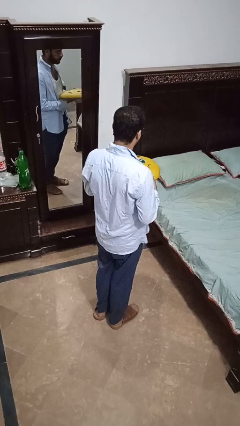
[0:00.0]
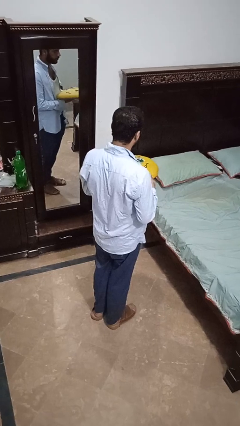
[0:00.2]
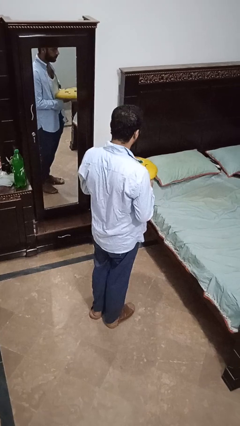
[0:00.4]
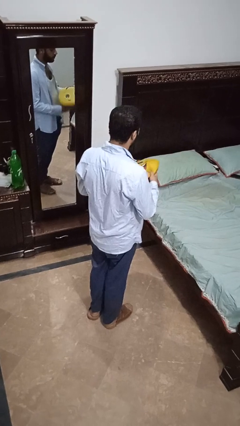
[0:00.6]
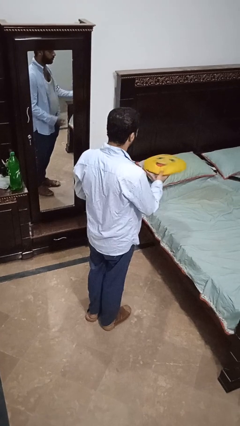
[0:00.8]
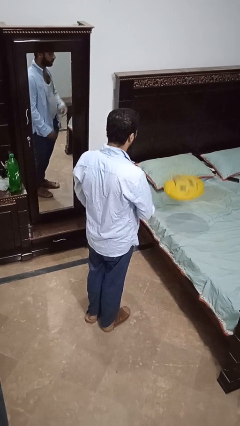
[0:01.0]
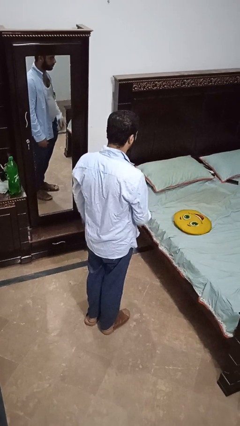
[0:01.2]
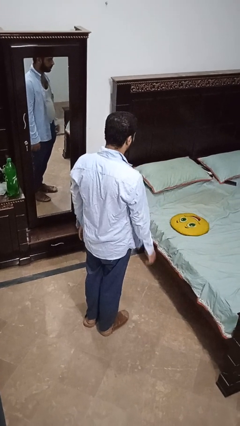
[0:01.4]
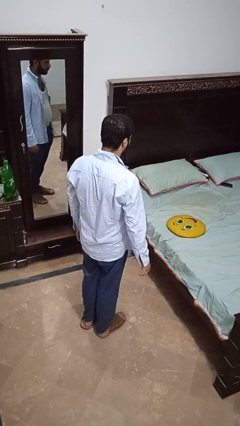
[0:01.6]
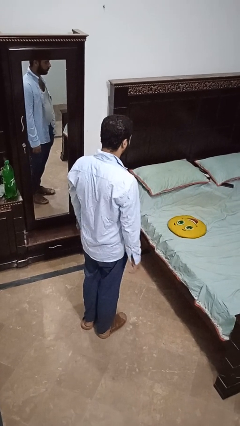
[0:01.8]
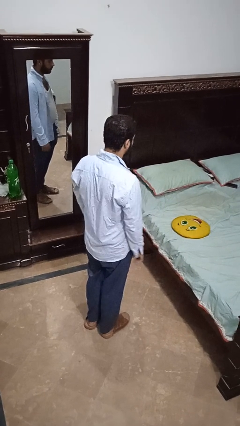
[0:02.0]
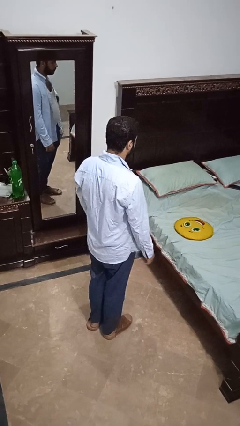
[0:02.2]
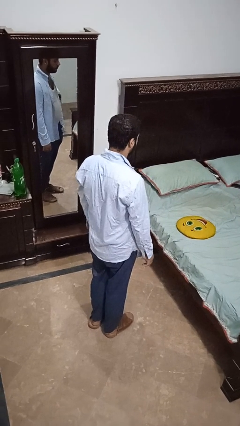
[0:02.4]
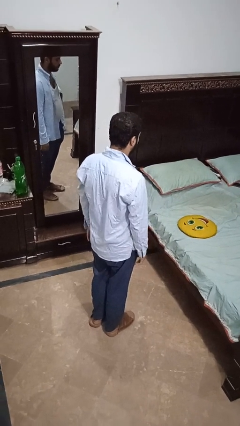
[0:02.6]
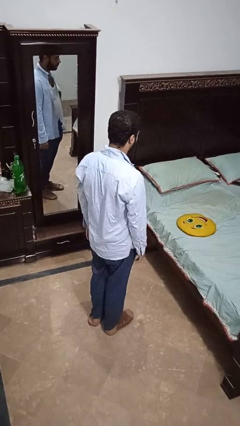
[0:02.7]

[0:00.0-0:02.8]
person throws object on bed

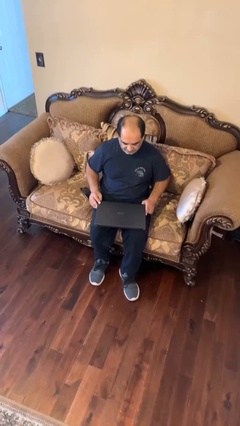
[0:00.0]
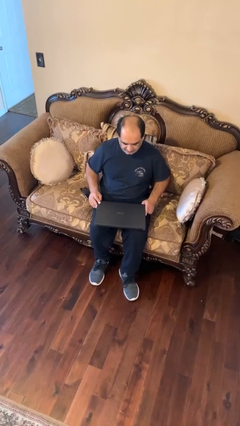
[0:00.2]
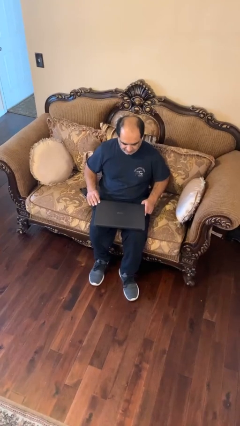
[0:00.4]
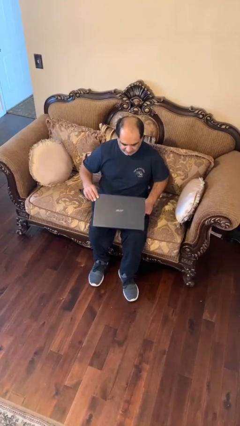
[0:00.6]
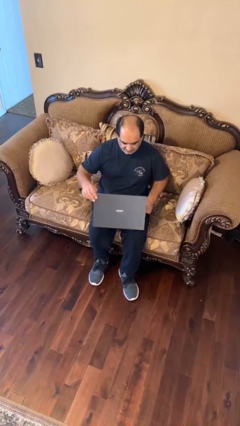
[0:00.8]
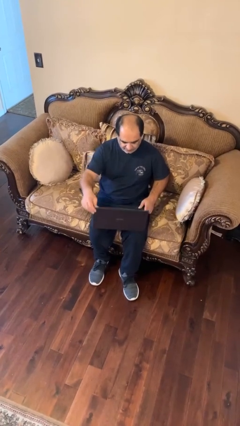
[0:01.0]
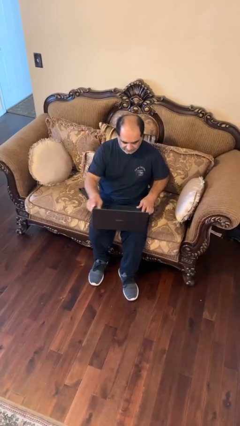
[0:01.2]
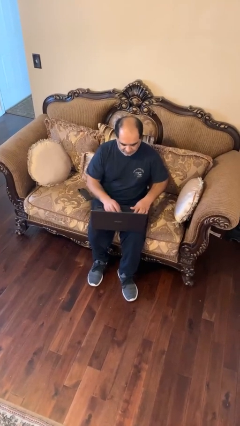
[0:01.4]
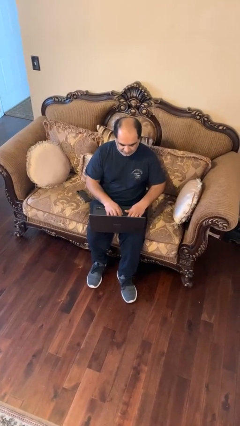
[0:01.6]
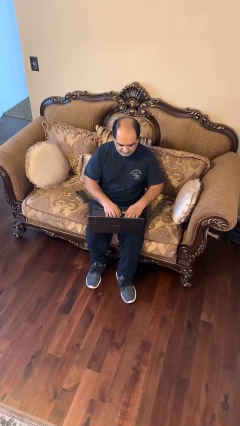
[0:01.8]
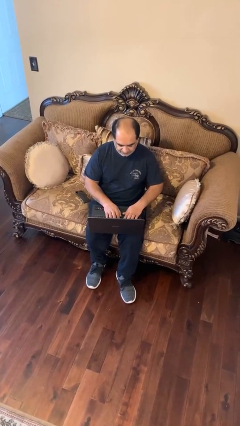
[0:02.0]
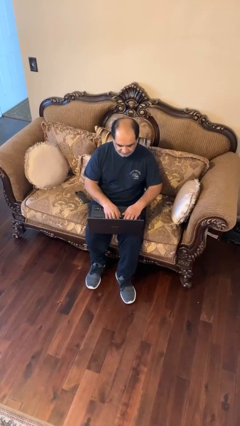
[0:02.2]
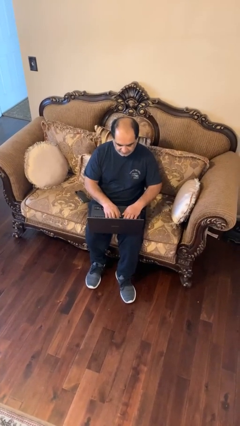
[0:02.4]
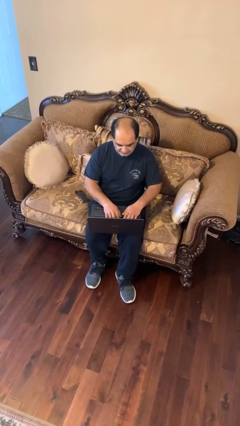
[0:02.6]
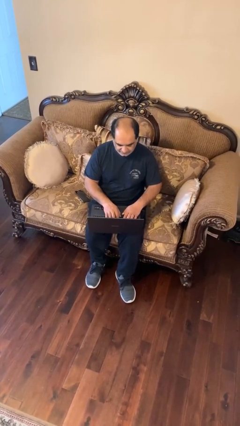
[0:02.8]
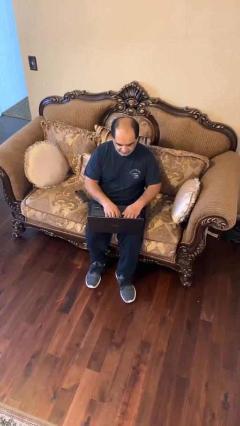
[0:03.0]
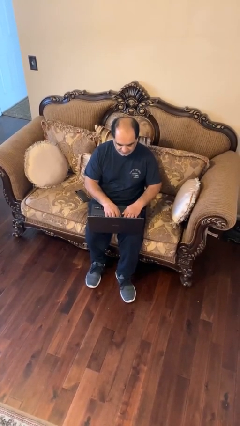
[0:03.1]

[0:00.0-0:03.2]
person interacts with laptop

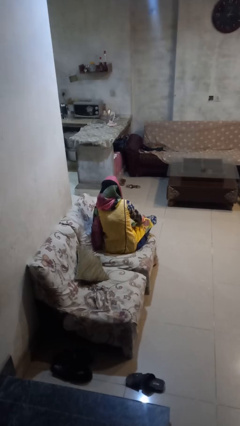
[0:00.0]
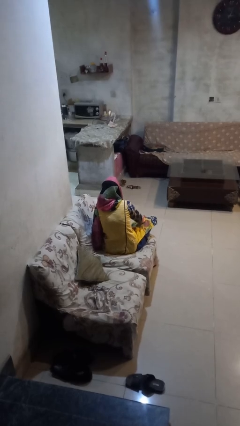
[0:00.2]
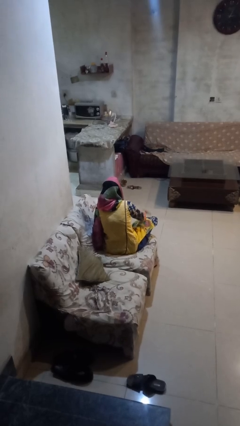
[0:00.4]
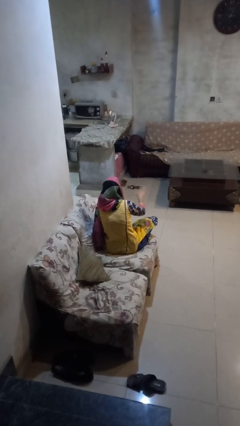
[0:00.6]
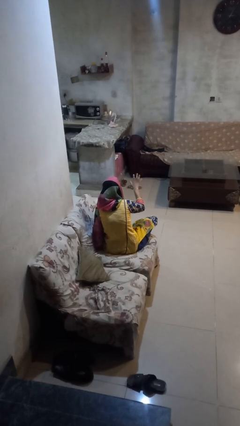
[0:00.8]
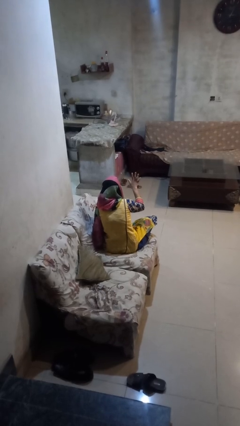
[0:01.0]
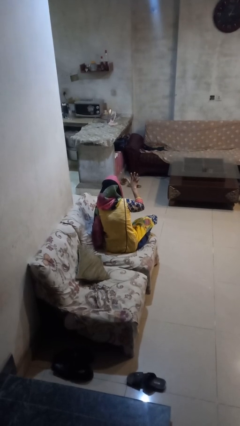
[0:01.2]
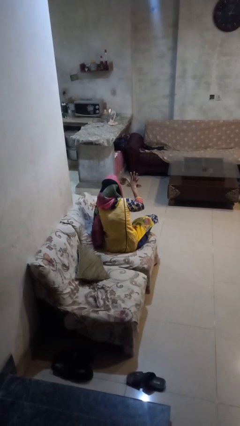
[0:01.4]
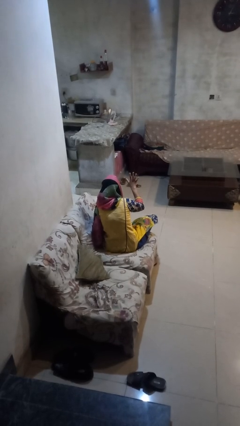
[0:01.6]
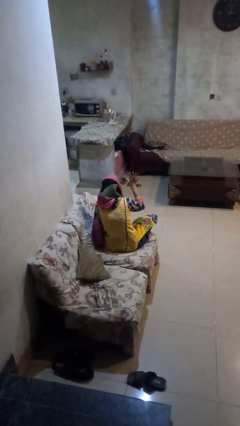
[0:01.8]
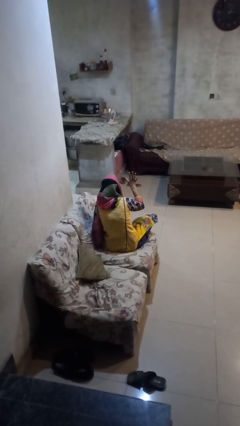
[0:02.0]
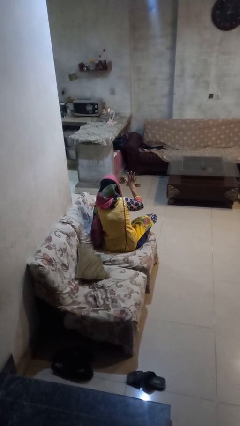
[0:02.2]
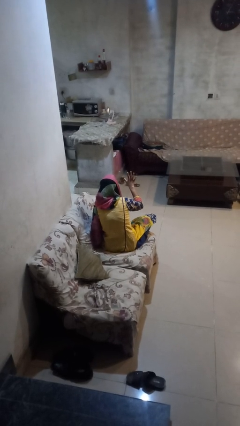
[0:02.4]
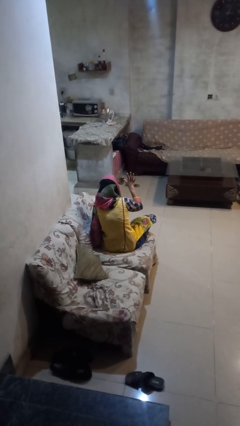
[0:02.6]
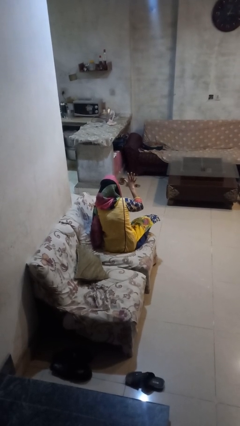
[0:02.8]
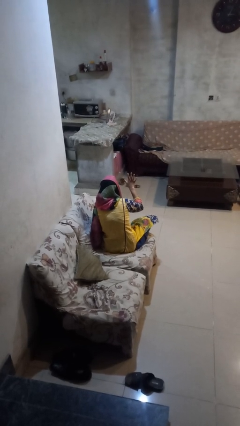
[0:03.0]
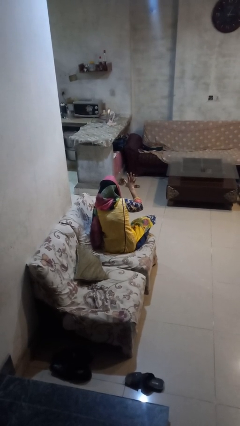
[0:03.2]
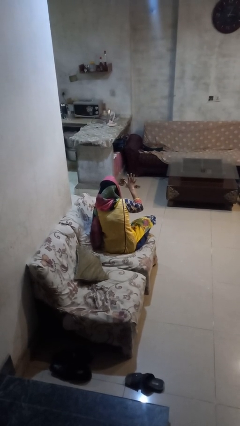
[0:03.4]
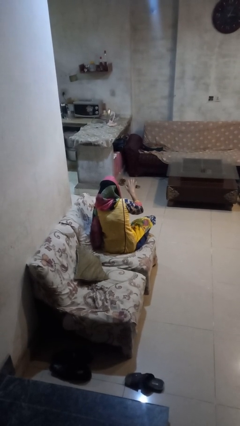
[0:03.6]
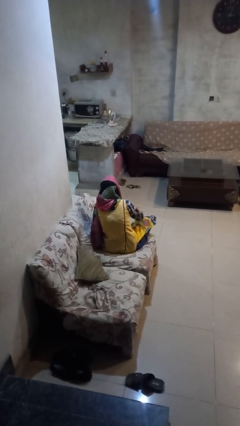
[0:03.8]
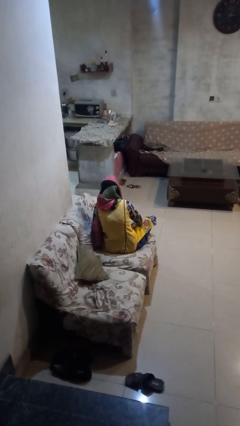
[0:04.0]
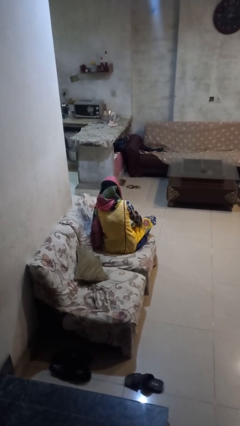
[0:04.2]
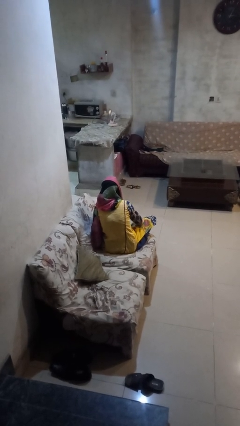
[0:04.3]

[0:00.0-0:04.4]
person gestures number five

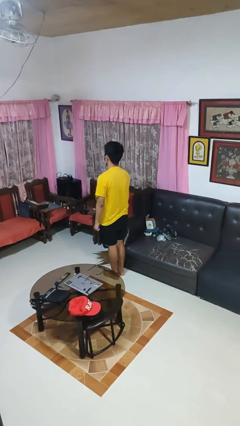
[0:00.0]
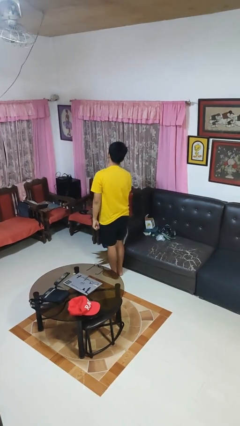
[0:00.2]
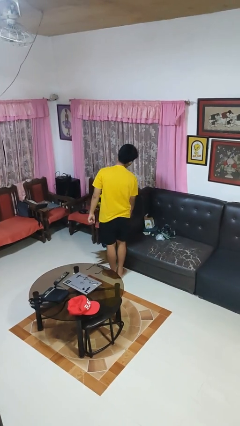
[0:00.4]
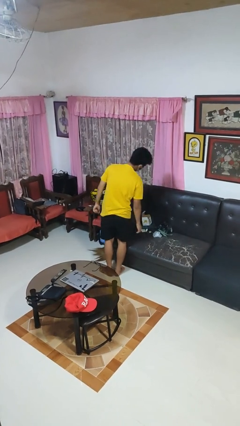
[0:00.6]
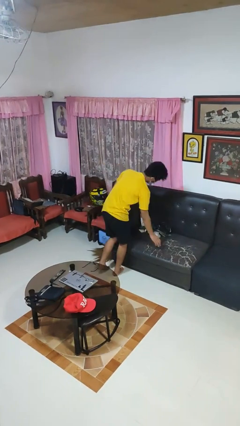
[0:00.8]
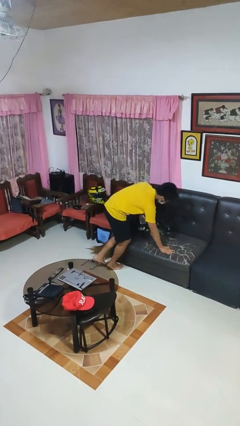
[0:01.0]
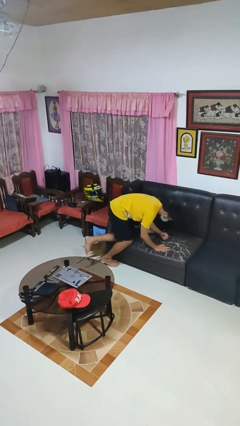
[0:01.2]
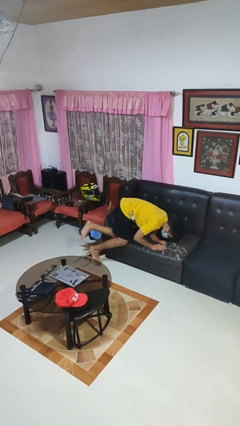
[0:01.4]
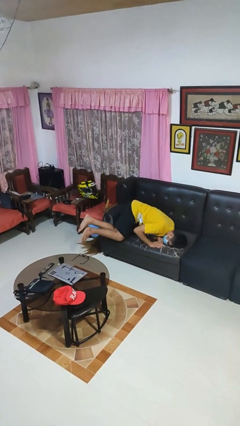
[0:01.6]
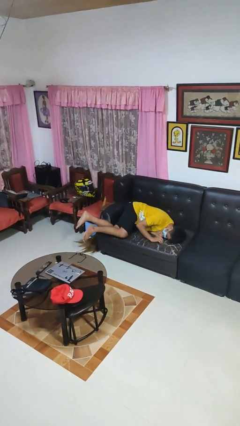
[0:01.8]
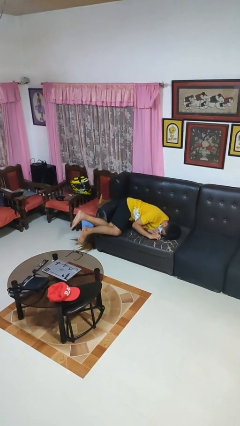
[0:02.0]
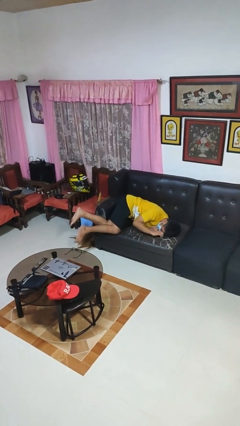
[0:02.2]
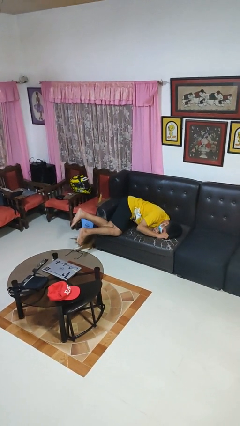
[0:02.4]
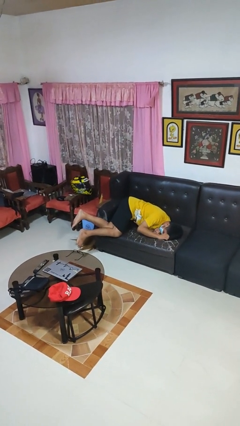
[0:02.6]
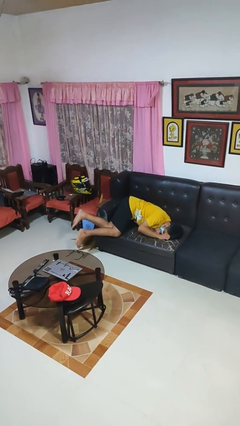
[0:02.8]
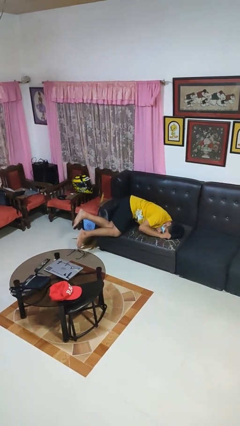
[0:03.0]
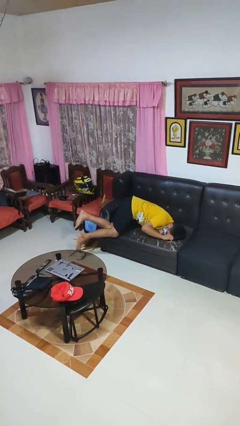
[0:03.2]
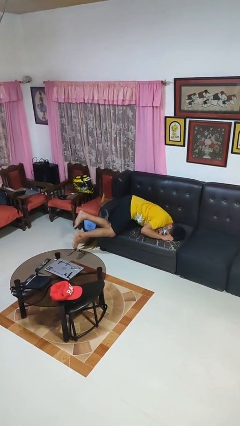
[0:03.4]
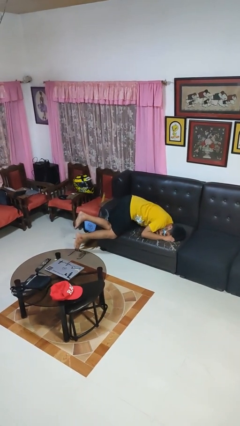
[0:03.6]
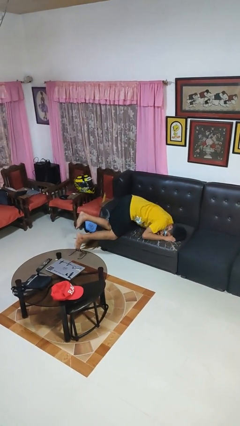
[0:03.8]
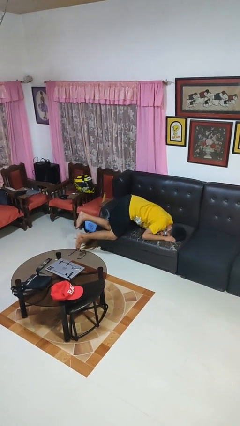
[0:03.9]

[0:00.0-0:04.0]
person lies down on couch

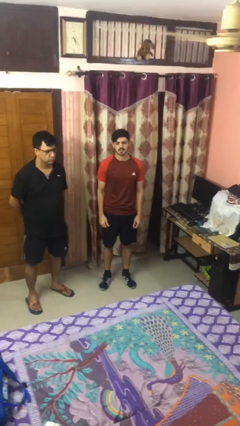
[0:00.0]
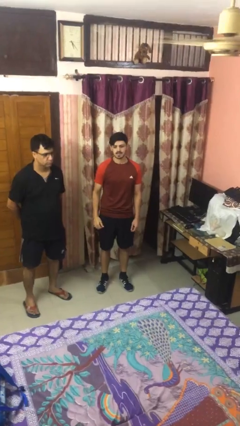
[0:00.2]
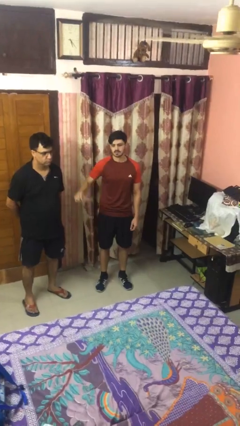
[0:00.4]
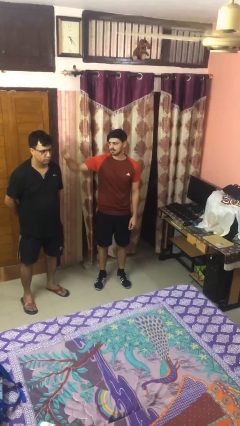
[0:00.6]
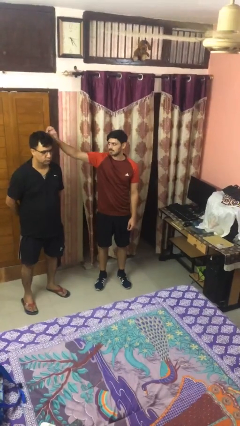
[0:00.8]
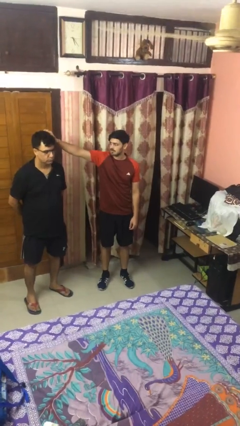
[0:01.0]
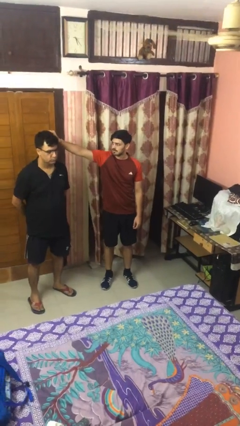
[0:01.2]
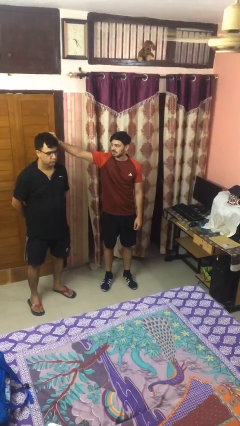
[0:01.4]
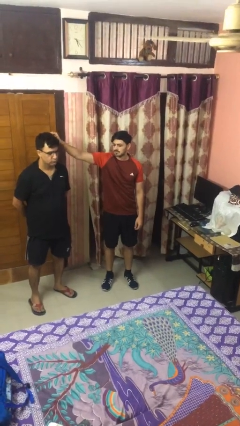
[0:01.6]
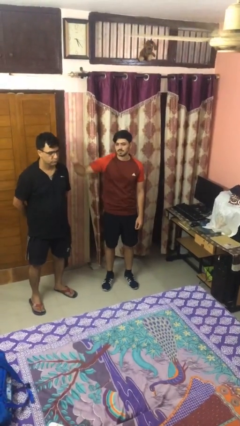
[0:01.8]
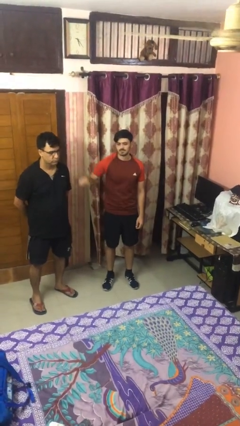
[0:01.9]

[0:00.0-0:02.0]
person grabs person by hair

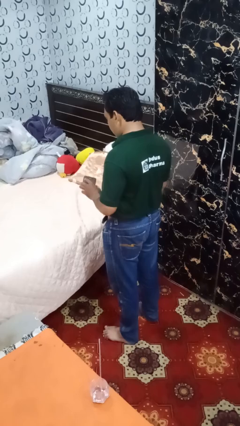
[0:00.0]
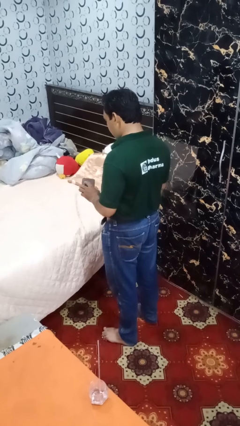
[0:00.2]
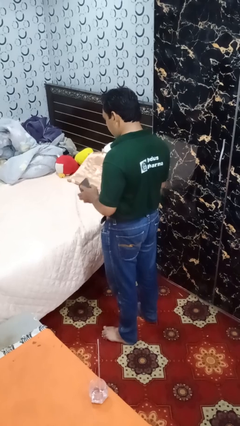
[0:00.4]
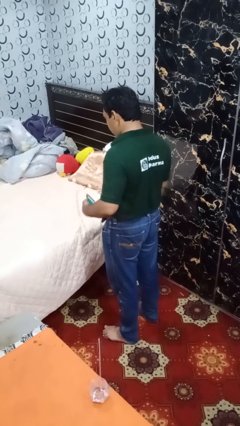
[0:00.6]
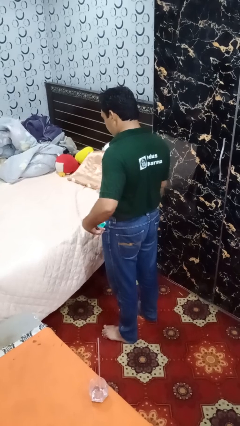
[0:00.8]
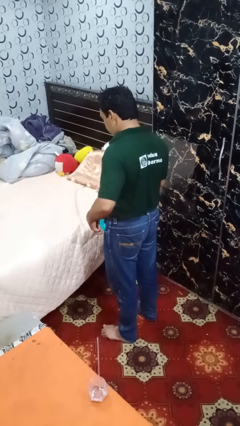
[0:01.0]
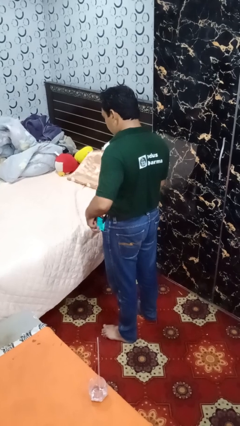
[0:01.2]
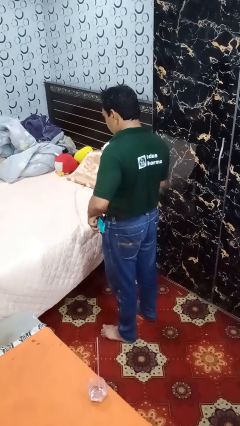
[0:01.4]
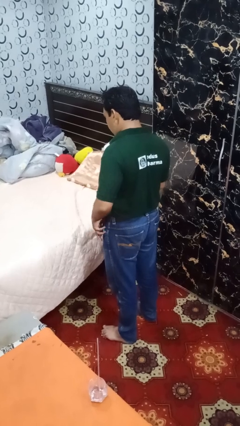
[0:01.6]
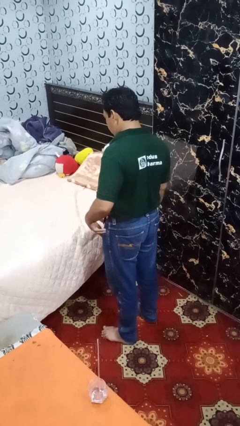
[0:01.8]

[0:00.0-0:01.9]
person puts phone into pocket
